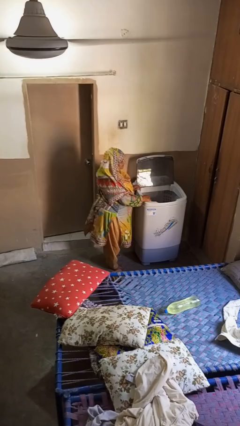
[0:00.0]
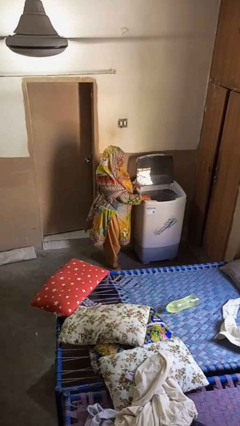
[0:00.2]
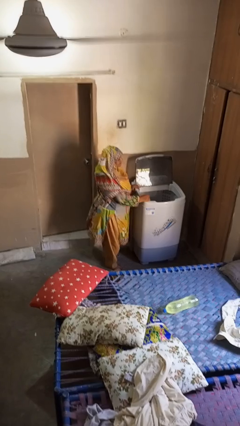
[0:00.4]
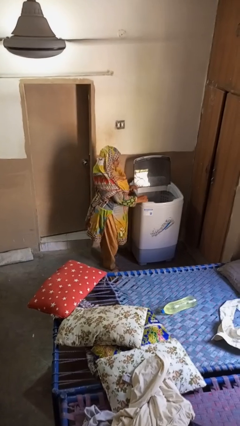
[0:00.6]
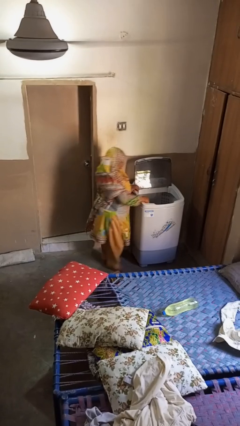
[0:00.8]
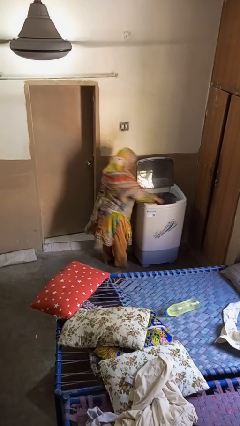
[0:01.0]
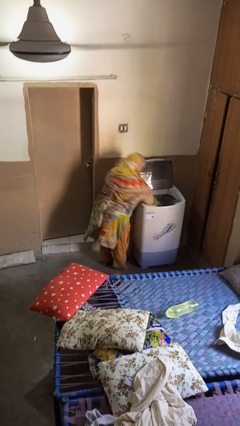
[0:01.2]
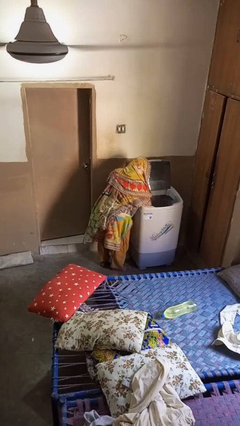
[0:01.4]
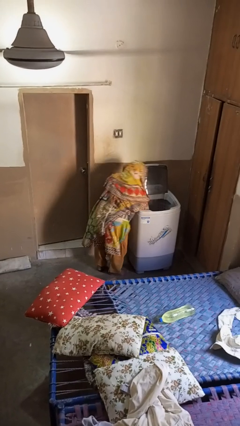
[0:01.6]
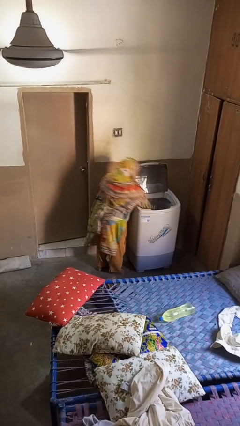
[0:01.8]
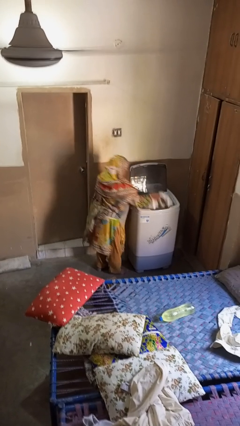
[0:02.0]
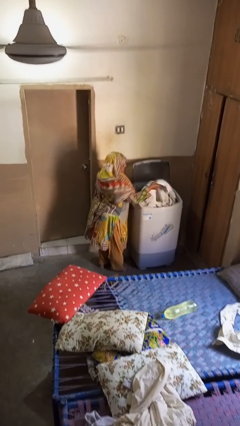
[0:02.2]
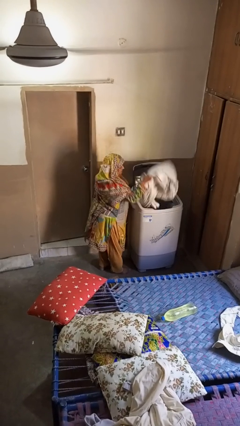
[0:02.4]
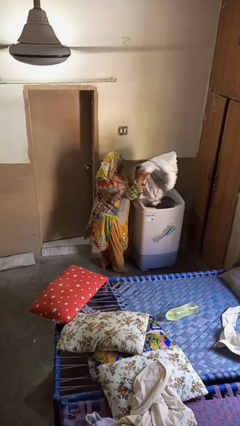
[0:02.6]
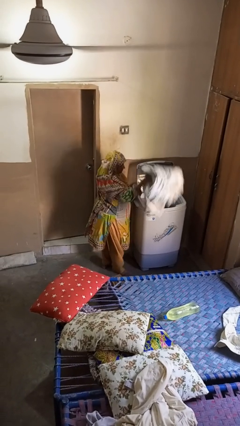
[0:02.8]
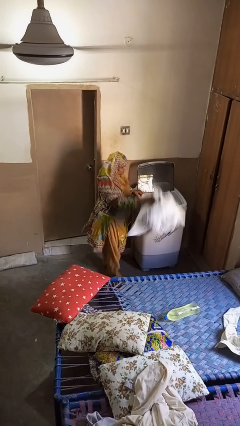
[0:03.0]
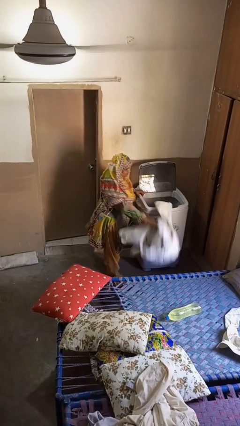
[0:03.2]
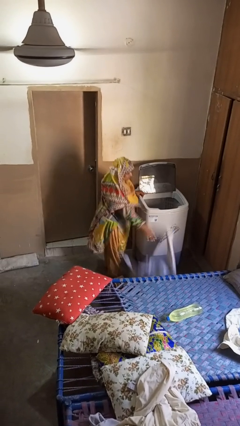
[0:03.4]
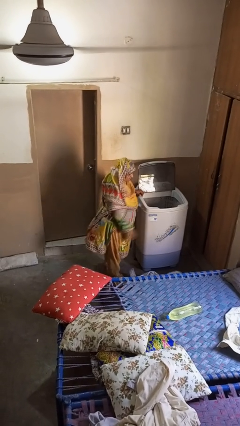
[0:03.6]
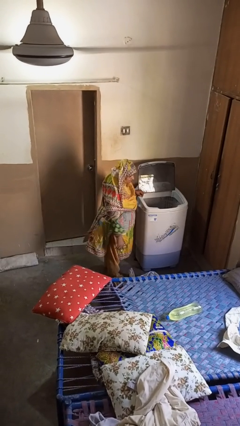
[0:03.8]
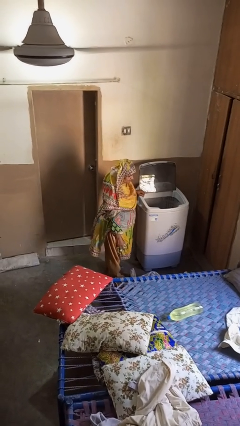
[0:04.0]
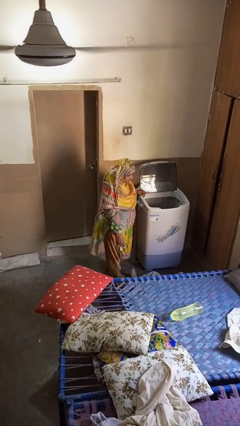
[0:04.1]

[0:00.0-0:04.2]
person unloads clotheswasher

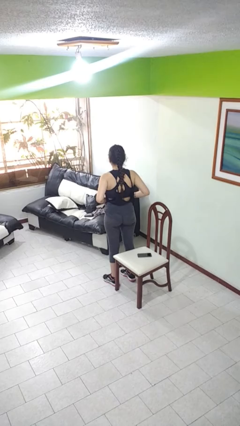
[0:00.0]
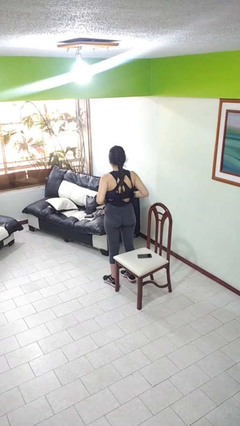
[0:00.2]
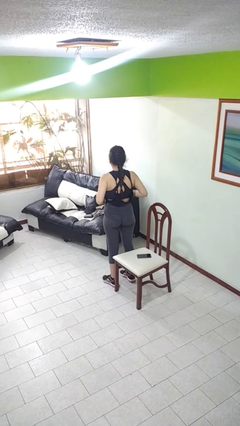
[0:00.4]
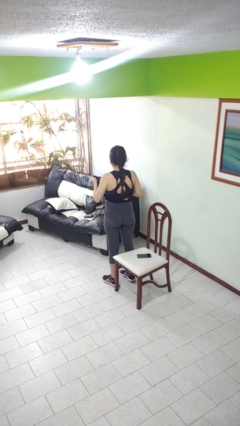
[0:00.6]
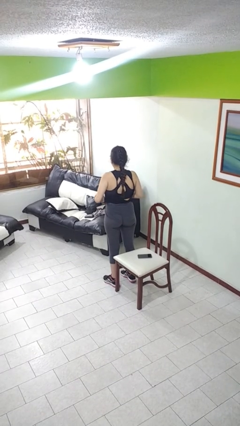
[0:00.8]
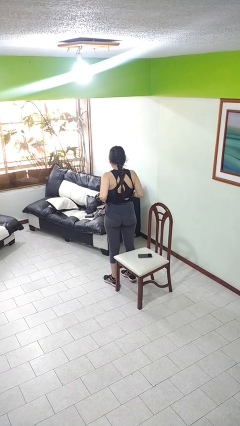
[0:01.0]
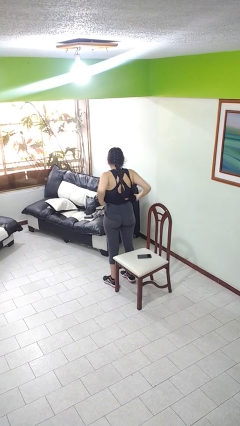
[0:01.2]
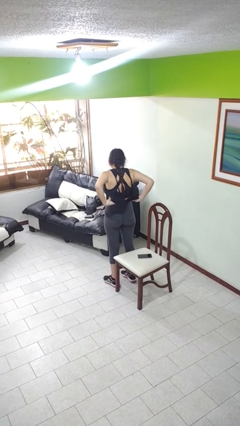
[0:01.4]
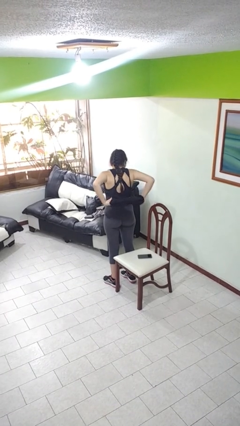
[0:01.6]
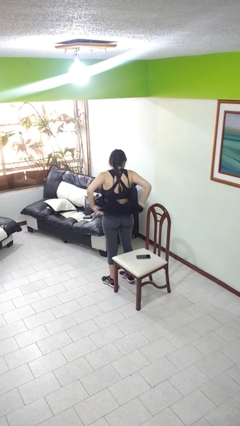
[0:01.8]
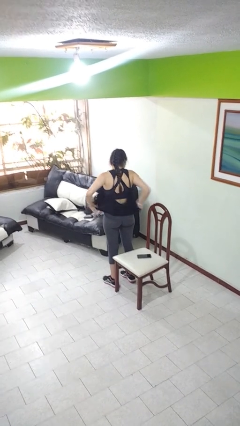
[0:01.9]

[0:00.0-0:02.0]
person untucks shirt

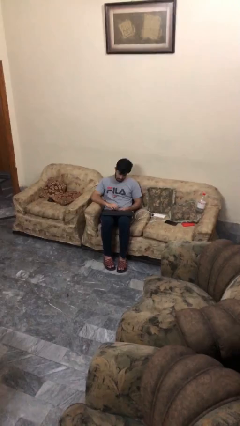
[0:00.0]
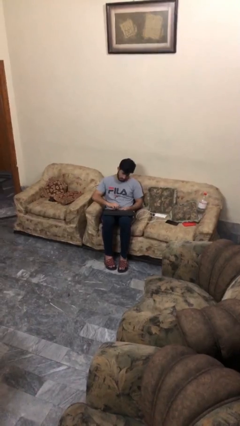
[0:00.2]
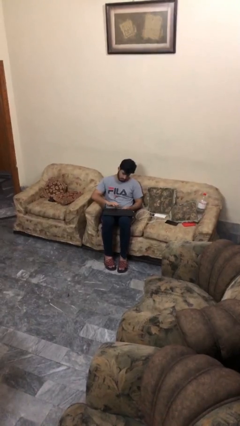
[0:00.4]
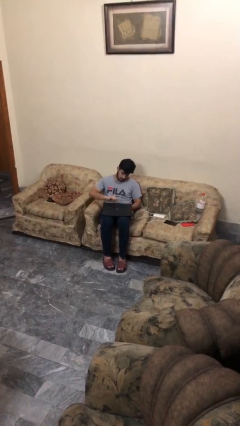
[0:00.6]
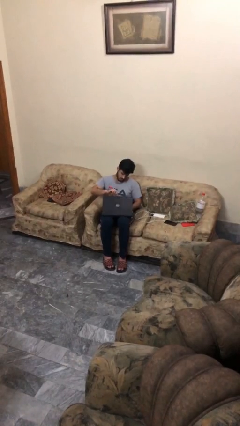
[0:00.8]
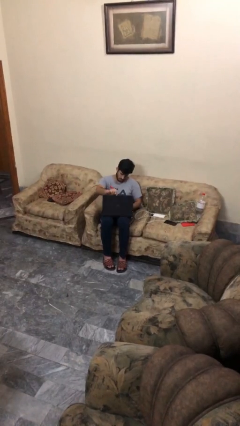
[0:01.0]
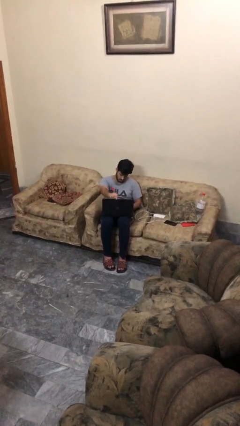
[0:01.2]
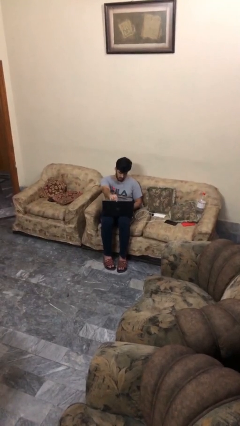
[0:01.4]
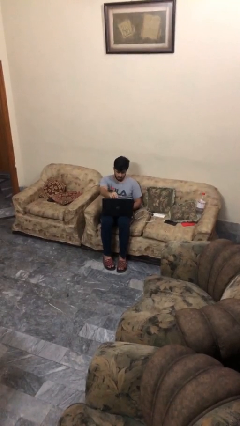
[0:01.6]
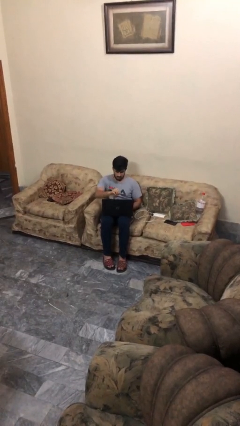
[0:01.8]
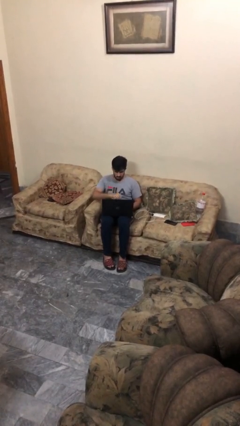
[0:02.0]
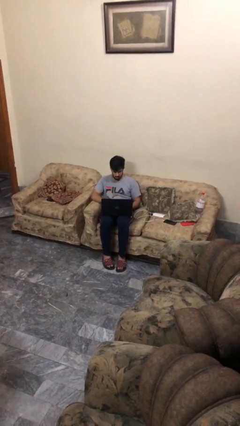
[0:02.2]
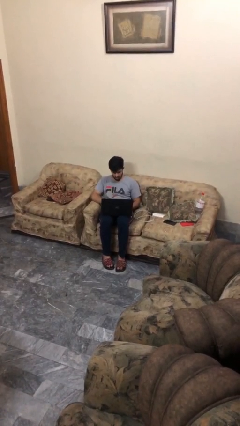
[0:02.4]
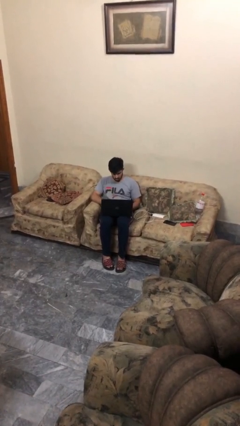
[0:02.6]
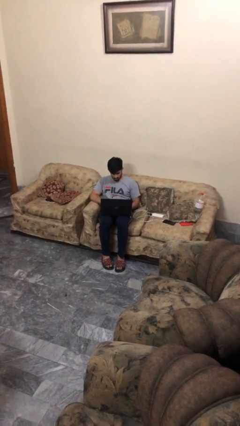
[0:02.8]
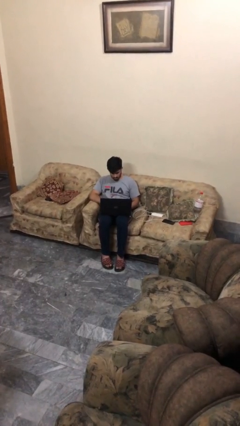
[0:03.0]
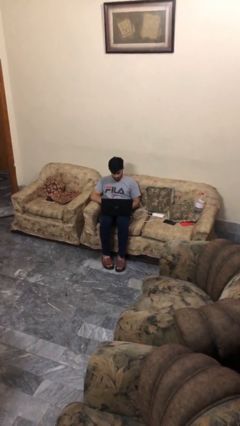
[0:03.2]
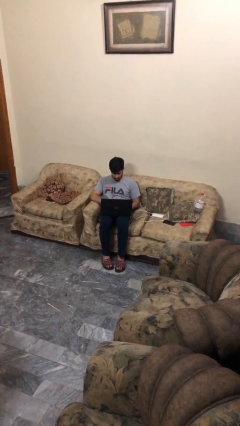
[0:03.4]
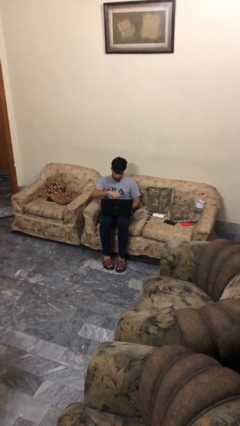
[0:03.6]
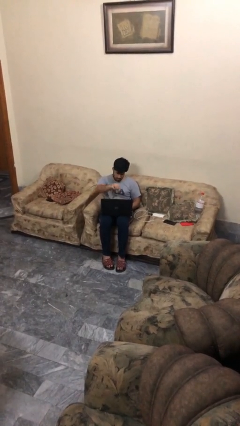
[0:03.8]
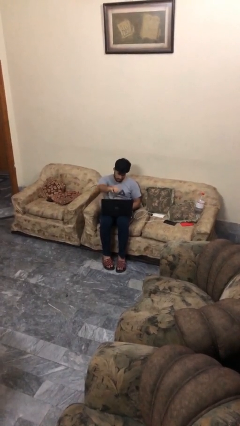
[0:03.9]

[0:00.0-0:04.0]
person opens laptop

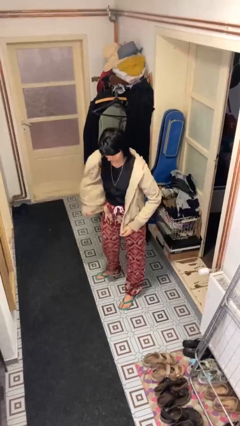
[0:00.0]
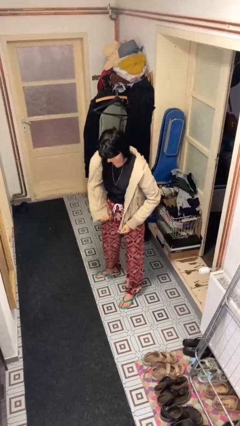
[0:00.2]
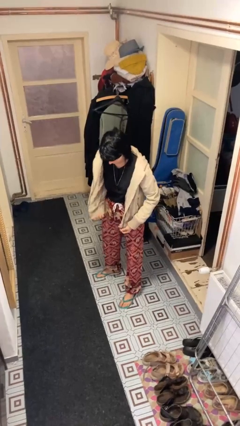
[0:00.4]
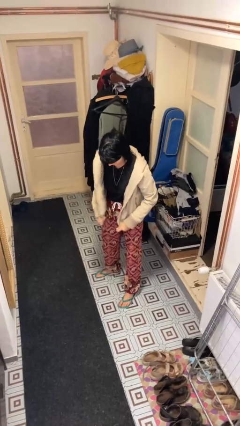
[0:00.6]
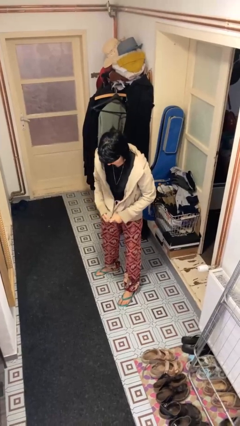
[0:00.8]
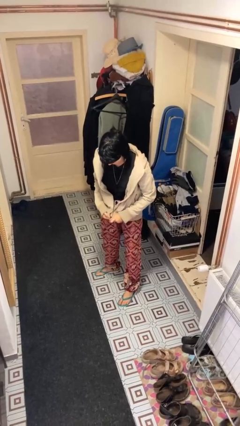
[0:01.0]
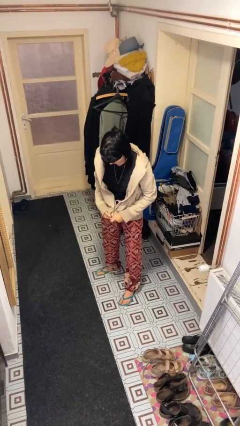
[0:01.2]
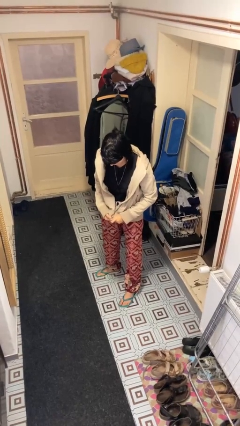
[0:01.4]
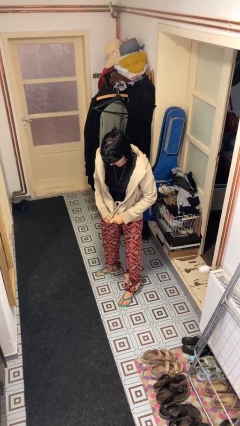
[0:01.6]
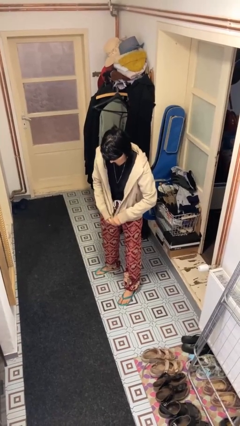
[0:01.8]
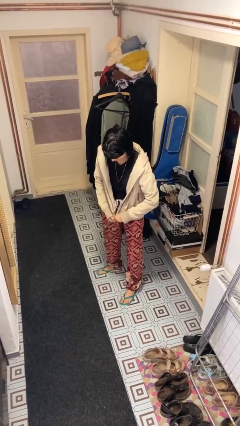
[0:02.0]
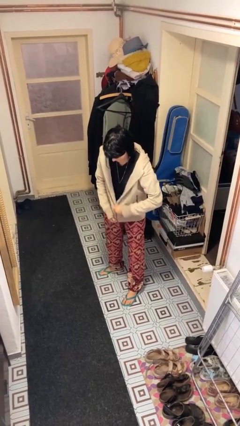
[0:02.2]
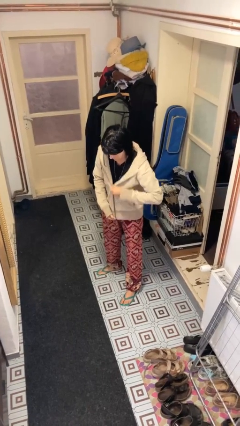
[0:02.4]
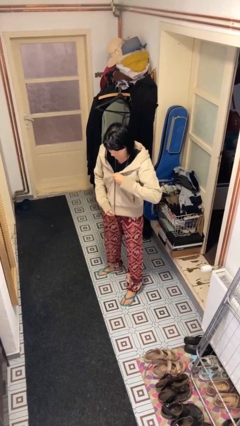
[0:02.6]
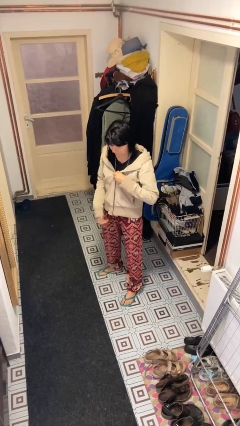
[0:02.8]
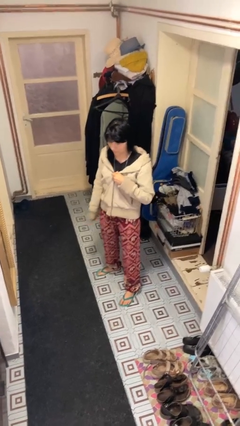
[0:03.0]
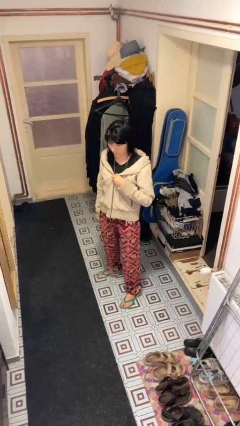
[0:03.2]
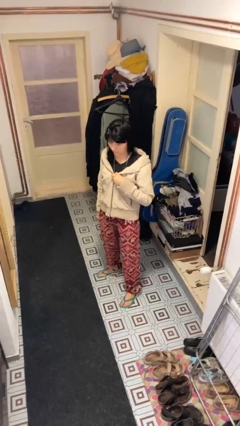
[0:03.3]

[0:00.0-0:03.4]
person zips up jacket

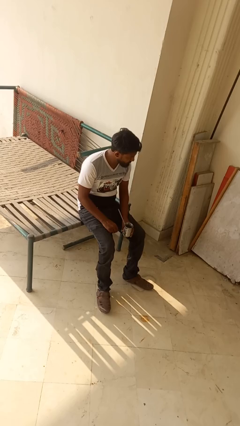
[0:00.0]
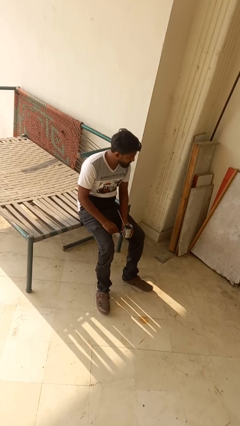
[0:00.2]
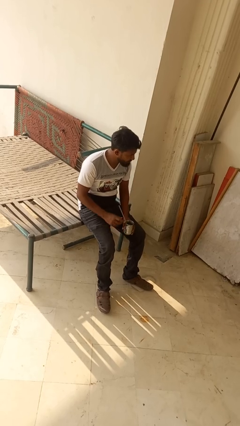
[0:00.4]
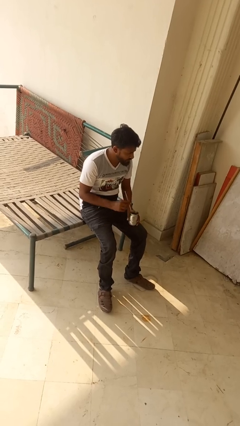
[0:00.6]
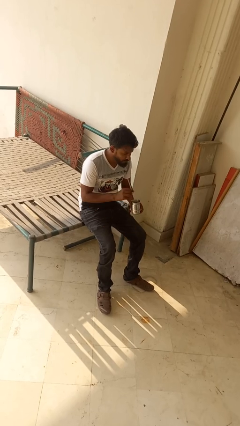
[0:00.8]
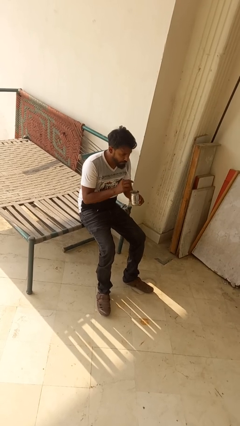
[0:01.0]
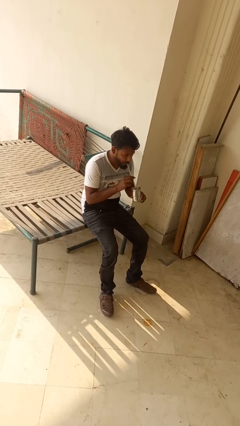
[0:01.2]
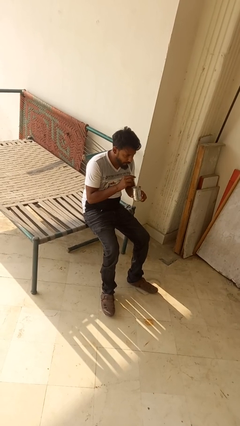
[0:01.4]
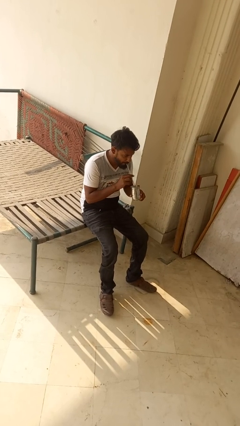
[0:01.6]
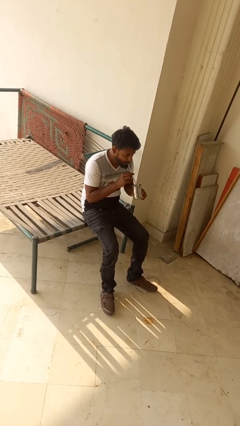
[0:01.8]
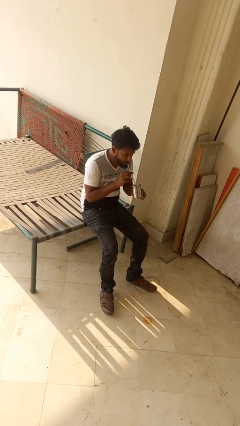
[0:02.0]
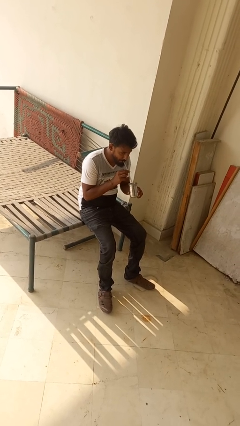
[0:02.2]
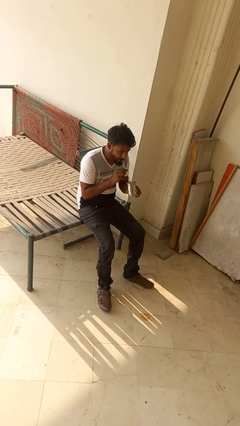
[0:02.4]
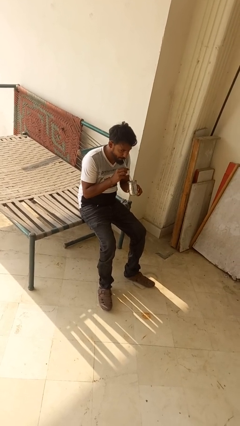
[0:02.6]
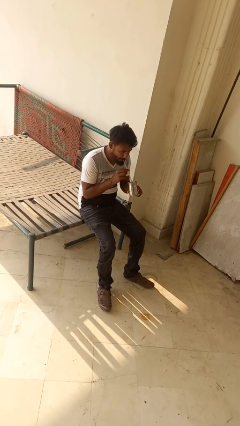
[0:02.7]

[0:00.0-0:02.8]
person drinks from straw

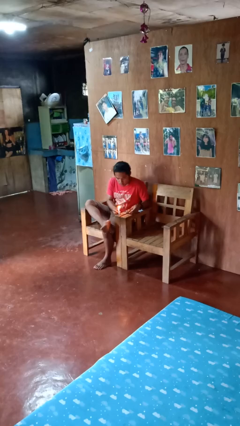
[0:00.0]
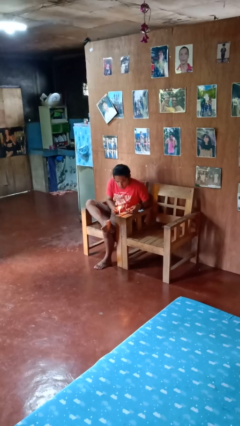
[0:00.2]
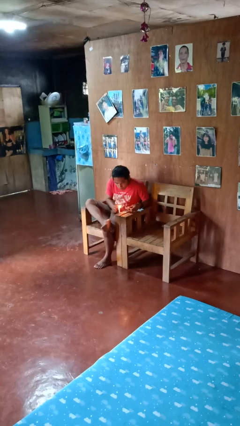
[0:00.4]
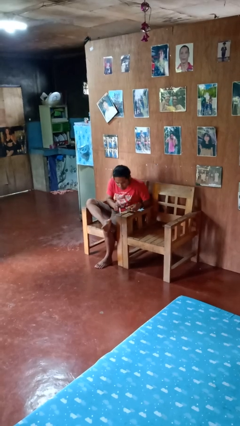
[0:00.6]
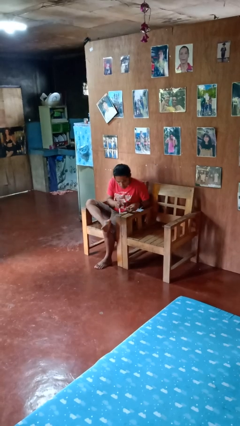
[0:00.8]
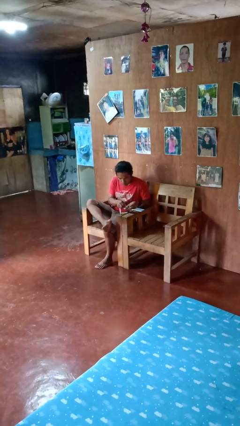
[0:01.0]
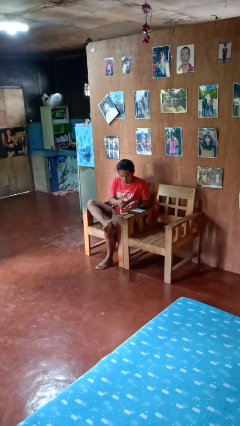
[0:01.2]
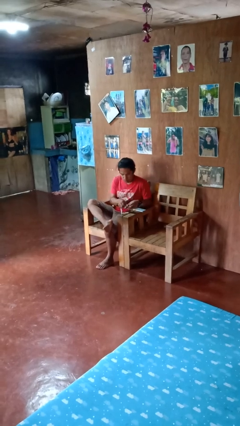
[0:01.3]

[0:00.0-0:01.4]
person extinguishes candle
